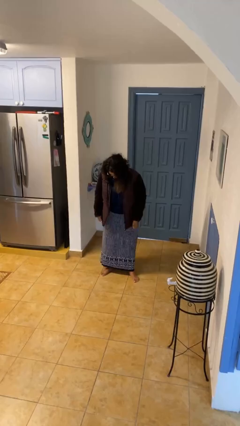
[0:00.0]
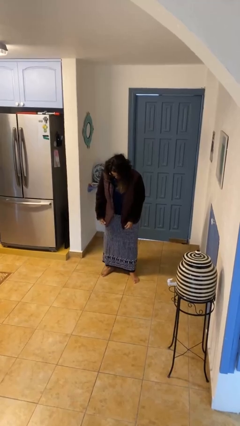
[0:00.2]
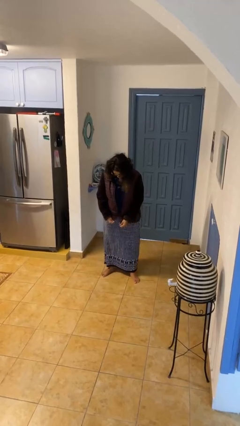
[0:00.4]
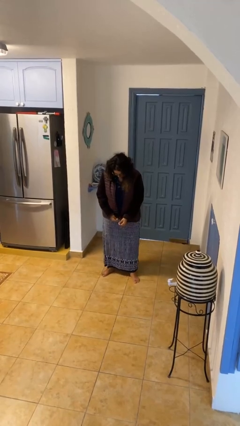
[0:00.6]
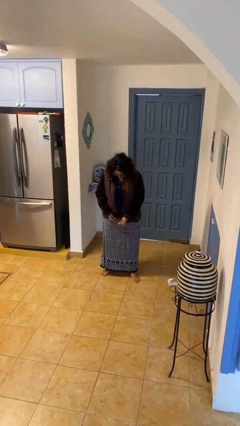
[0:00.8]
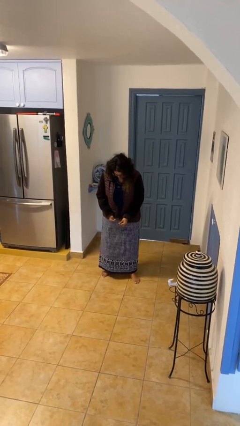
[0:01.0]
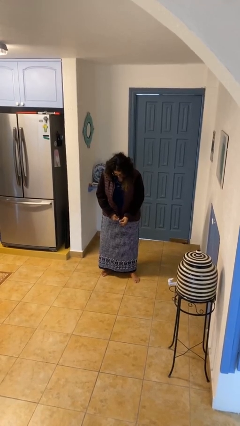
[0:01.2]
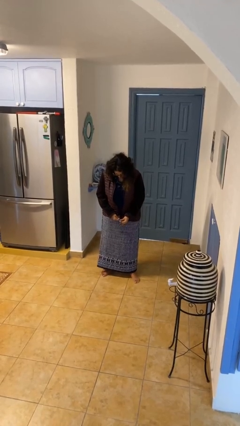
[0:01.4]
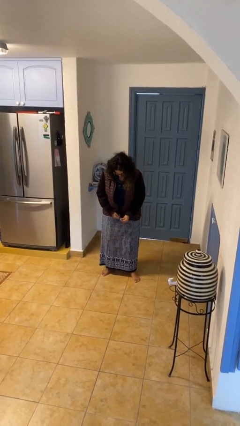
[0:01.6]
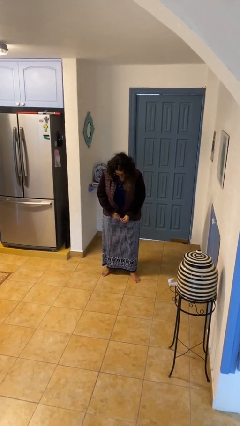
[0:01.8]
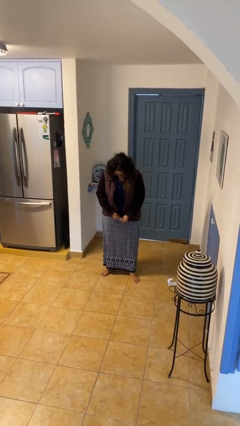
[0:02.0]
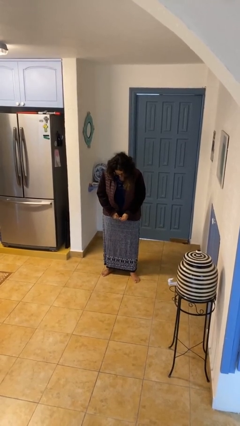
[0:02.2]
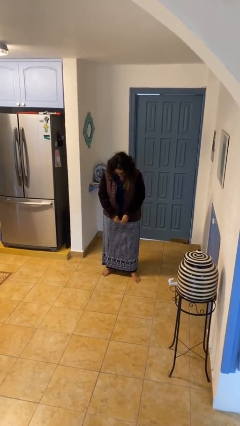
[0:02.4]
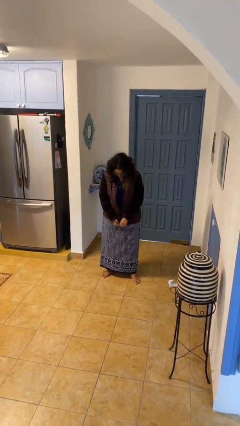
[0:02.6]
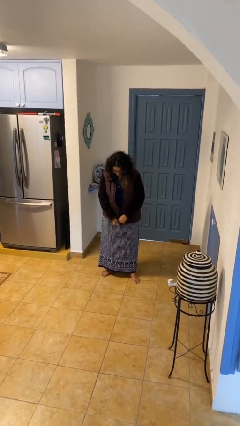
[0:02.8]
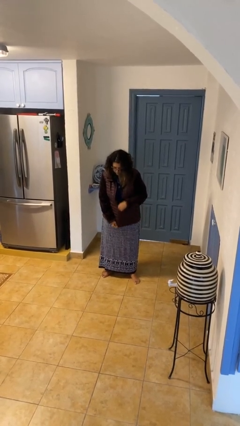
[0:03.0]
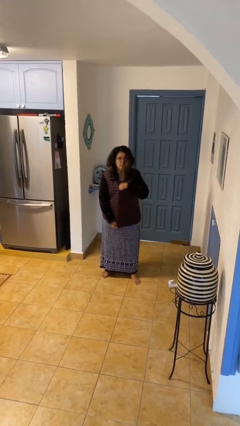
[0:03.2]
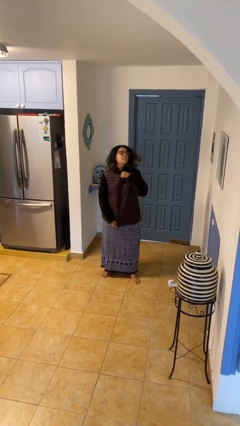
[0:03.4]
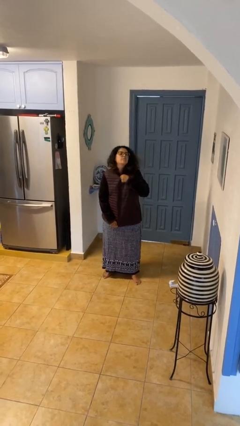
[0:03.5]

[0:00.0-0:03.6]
person zips up jacket

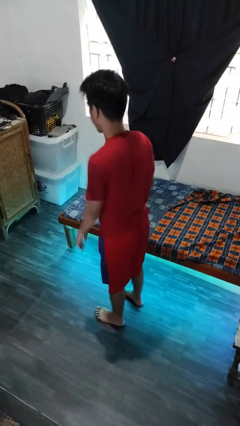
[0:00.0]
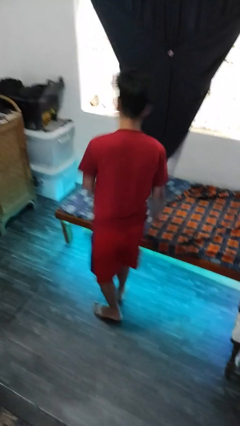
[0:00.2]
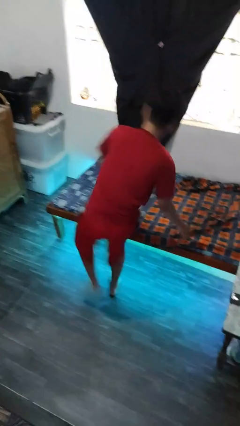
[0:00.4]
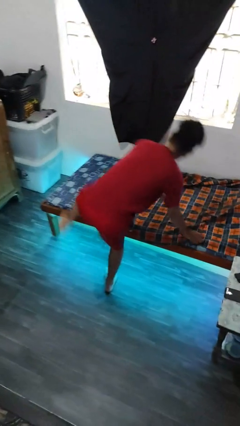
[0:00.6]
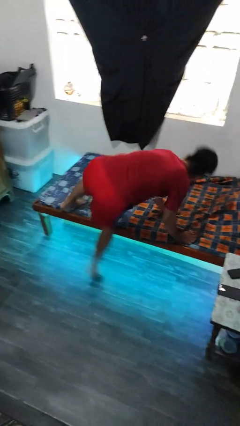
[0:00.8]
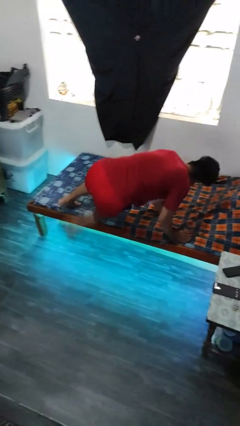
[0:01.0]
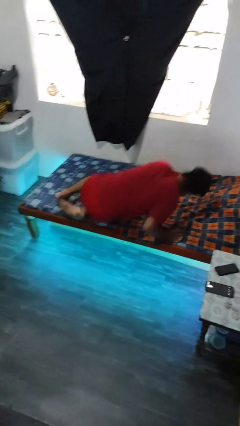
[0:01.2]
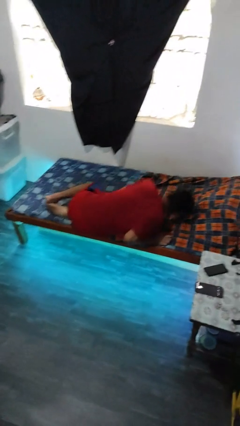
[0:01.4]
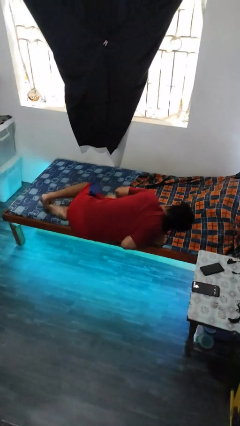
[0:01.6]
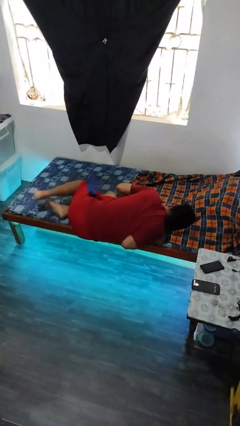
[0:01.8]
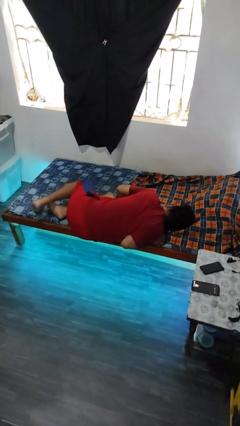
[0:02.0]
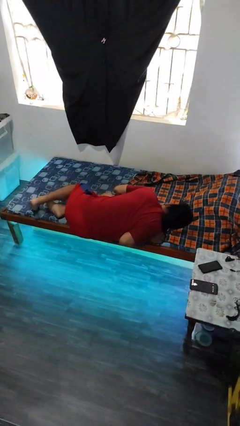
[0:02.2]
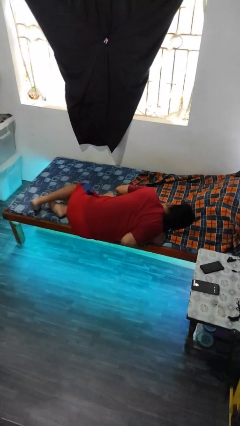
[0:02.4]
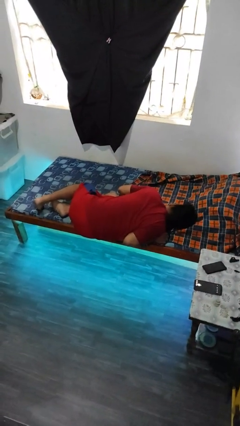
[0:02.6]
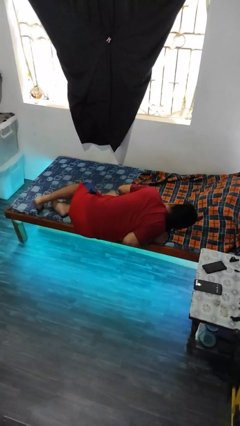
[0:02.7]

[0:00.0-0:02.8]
person lies down on bed

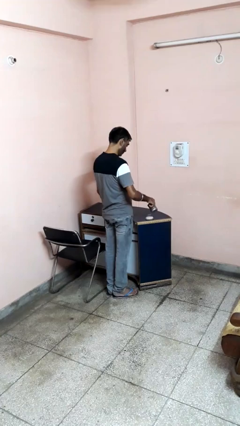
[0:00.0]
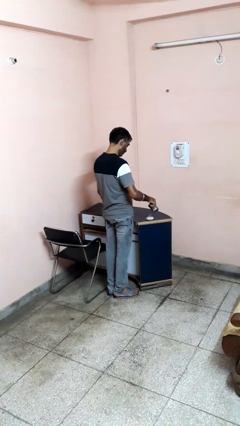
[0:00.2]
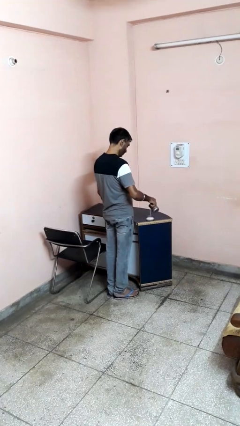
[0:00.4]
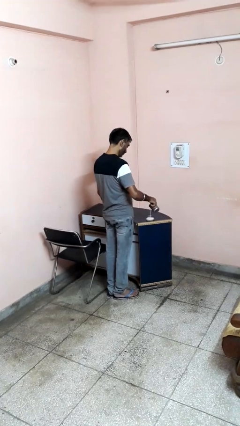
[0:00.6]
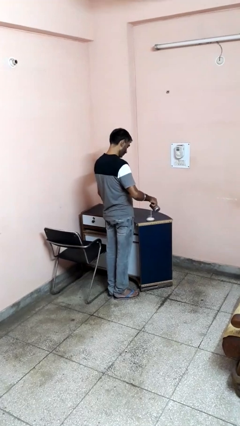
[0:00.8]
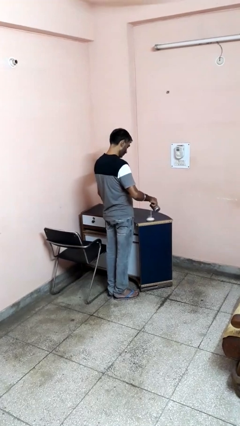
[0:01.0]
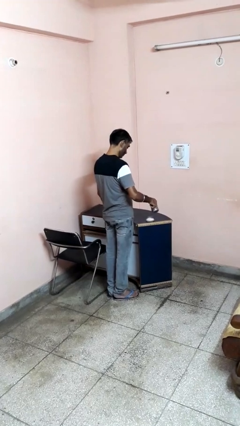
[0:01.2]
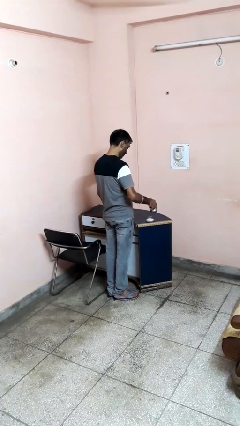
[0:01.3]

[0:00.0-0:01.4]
person pours into bowl

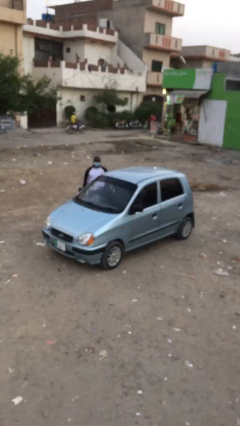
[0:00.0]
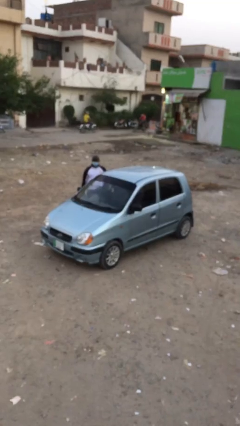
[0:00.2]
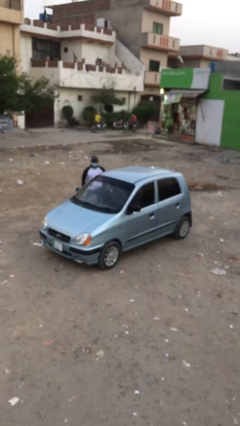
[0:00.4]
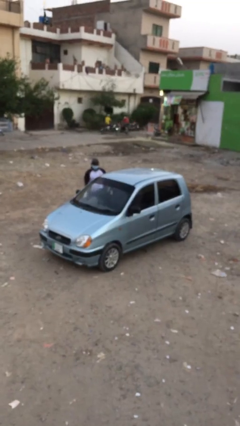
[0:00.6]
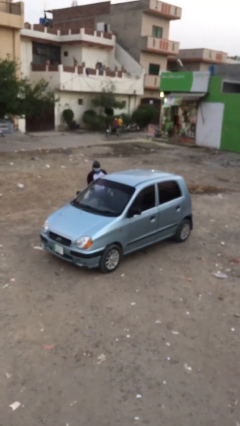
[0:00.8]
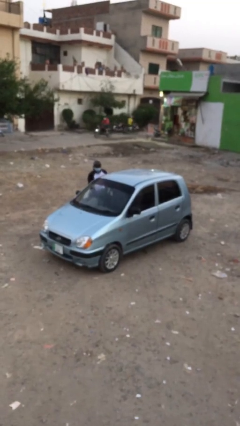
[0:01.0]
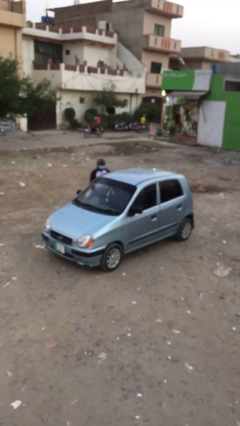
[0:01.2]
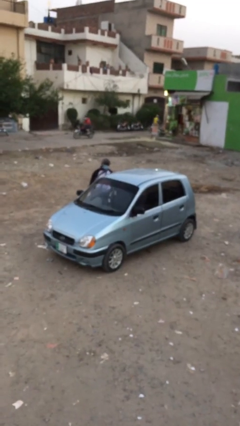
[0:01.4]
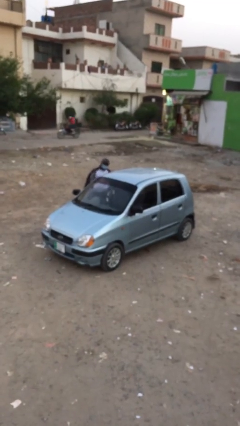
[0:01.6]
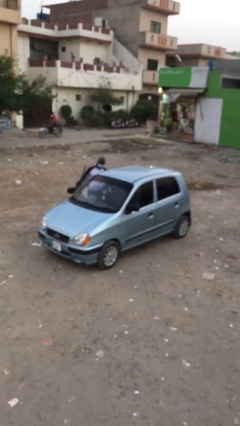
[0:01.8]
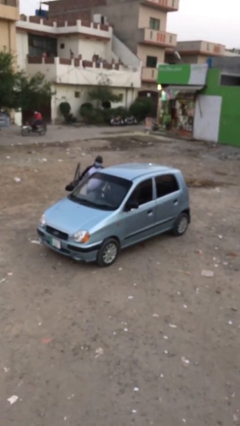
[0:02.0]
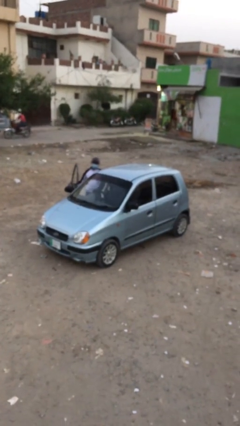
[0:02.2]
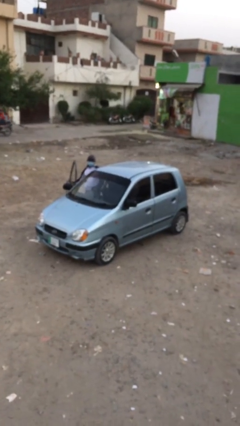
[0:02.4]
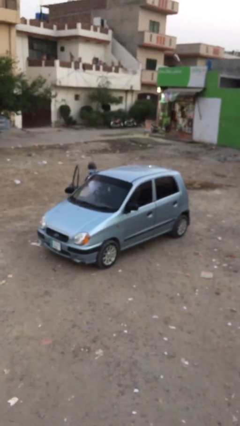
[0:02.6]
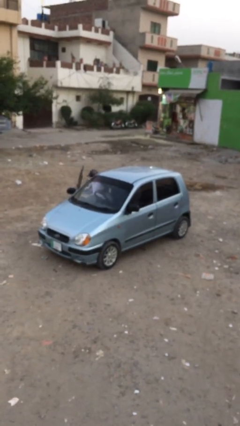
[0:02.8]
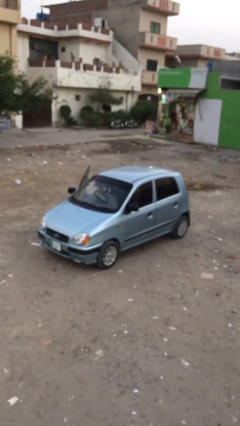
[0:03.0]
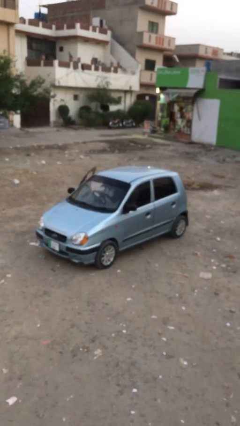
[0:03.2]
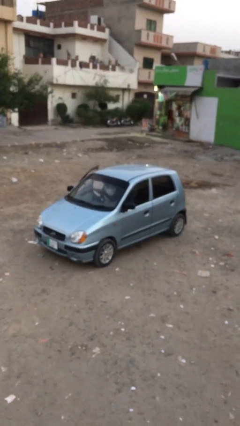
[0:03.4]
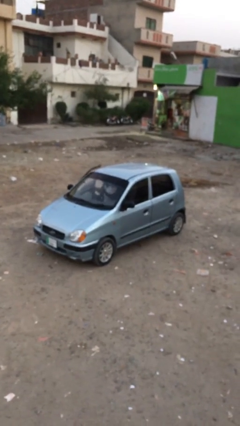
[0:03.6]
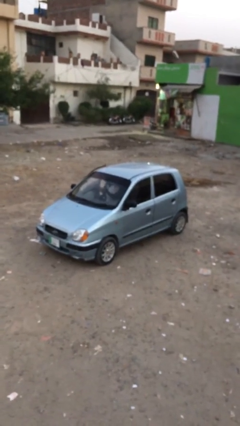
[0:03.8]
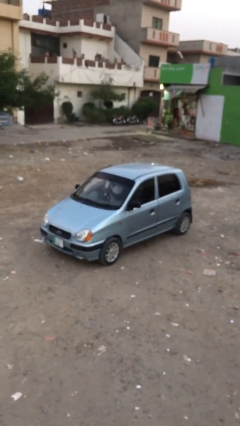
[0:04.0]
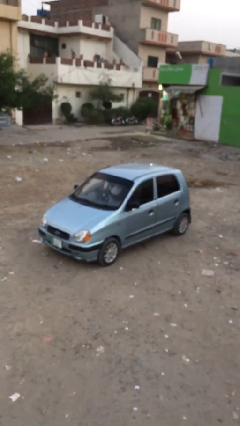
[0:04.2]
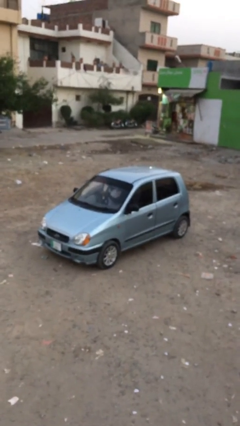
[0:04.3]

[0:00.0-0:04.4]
car picks up person

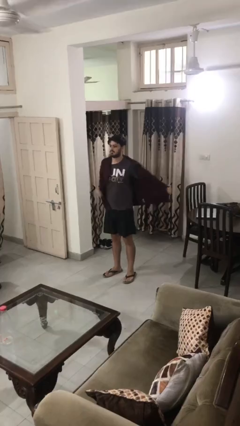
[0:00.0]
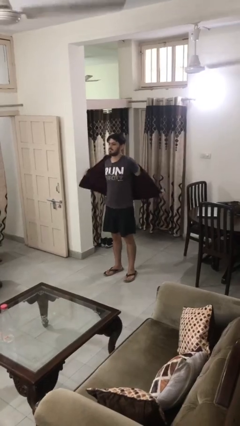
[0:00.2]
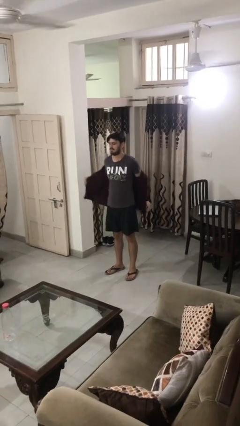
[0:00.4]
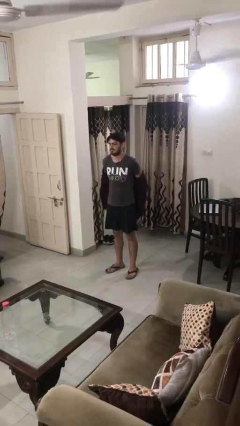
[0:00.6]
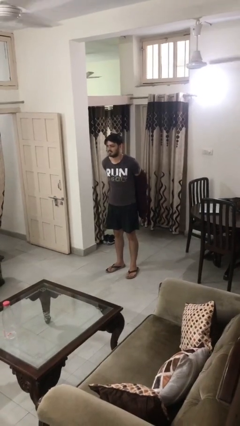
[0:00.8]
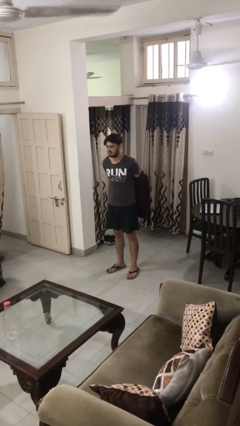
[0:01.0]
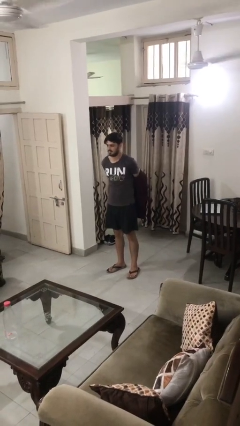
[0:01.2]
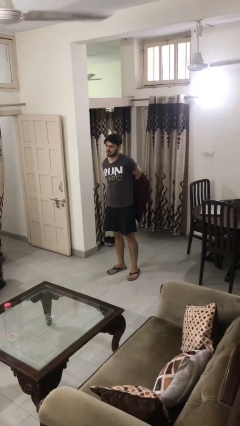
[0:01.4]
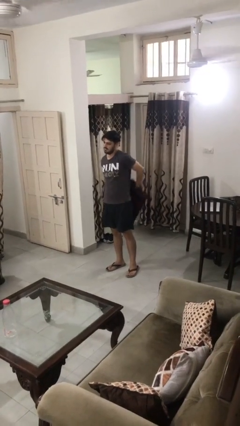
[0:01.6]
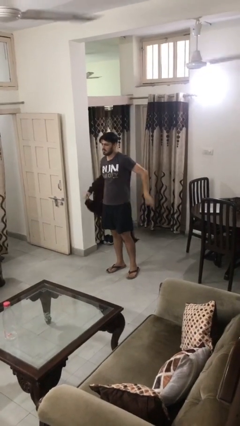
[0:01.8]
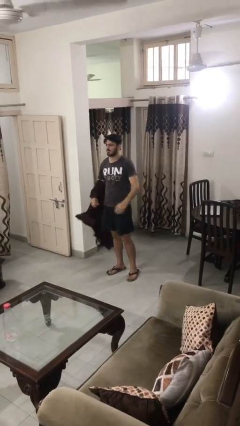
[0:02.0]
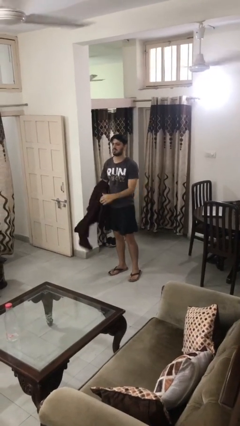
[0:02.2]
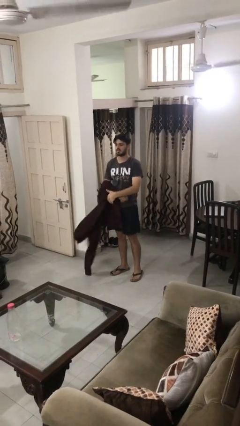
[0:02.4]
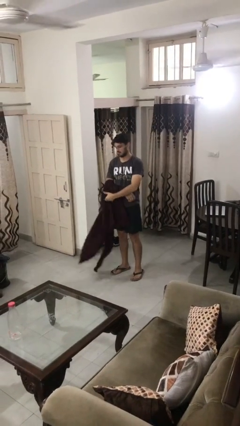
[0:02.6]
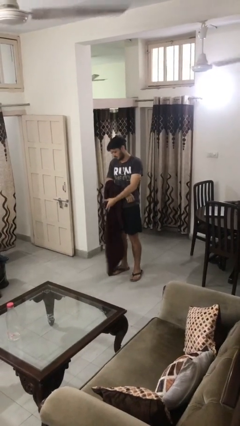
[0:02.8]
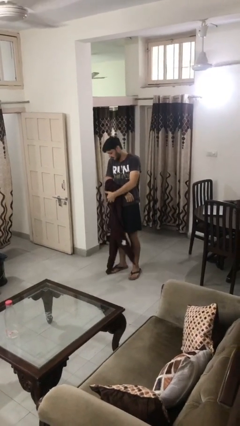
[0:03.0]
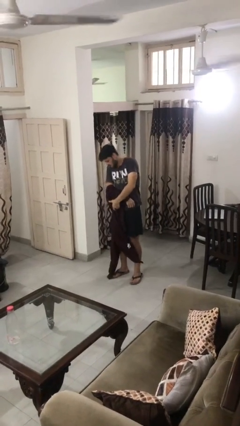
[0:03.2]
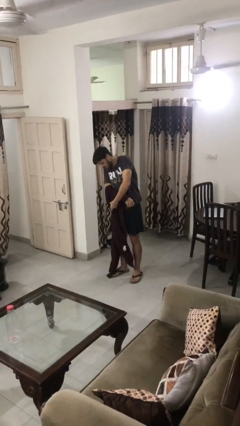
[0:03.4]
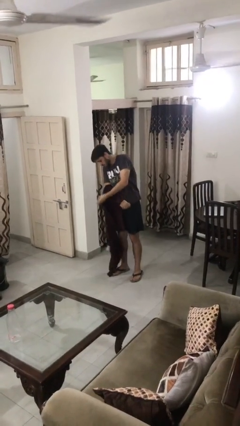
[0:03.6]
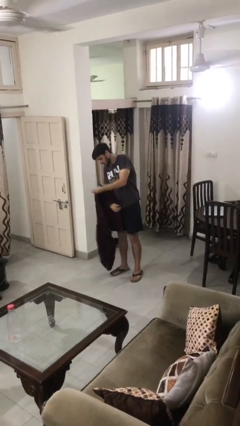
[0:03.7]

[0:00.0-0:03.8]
person takes off jacket

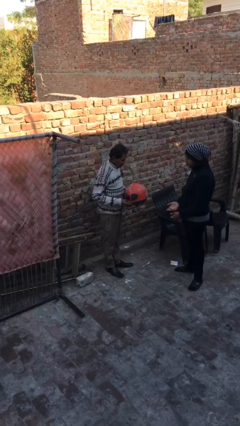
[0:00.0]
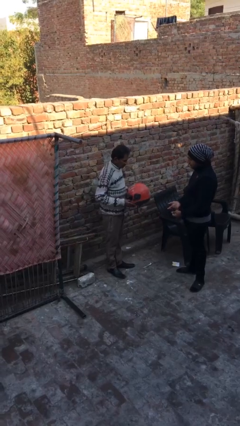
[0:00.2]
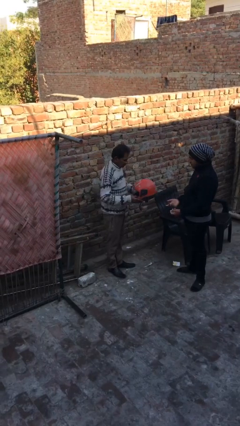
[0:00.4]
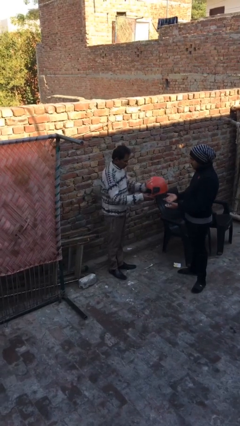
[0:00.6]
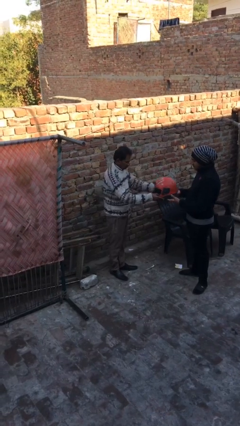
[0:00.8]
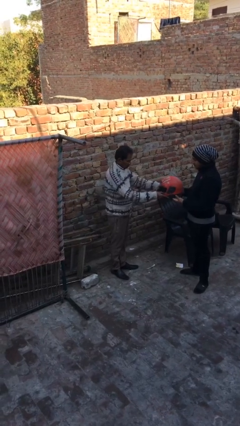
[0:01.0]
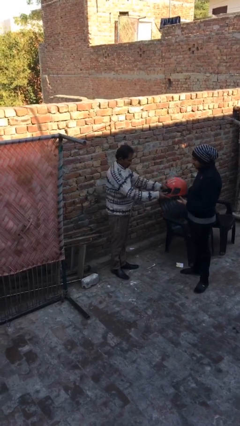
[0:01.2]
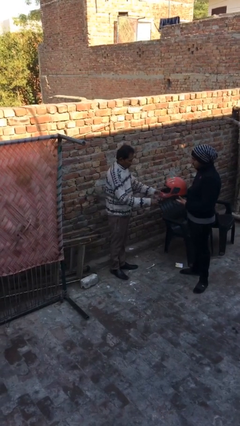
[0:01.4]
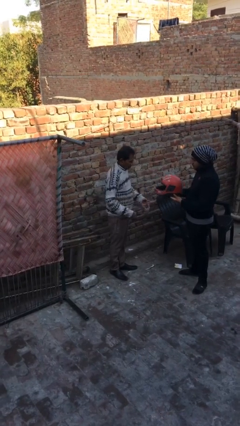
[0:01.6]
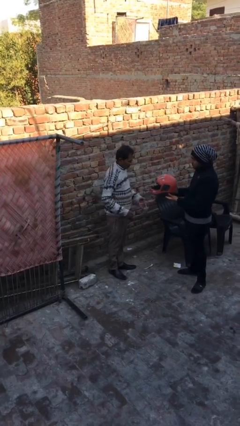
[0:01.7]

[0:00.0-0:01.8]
person transfers object to person
